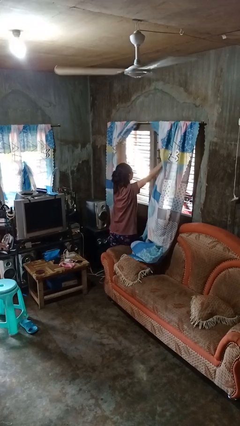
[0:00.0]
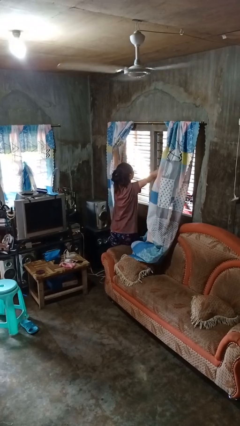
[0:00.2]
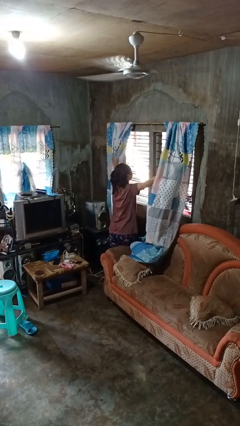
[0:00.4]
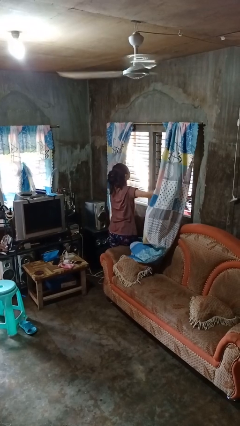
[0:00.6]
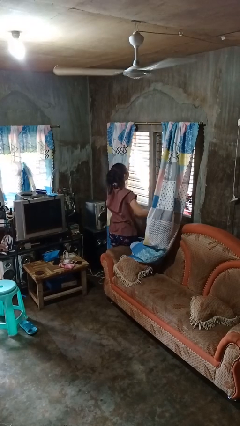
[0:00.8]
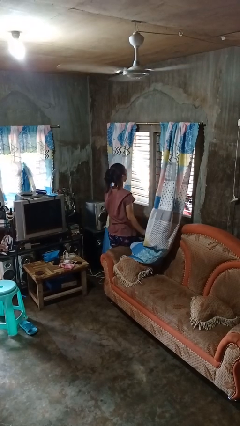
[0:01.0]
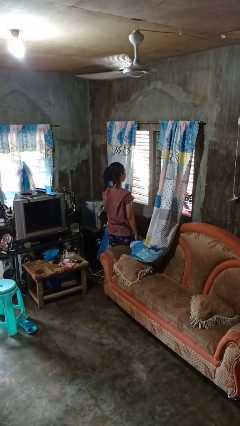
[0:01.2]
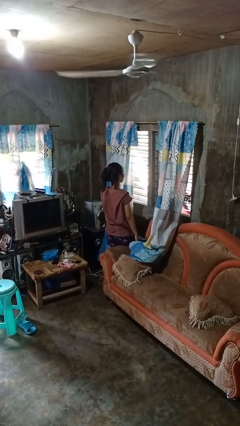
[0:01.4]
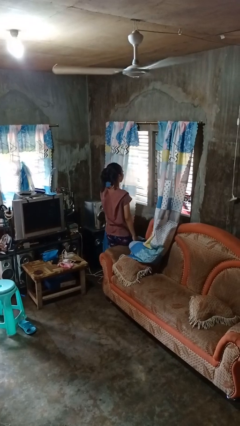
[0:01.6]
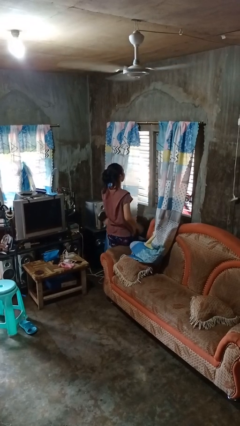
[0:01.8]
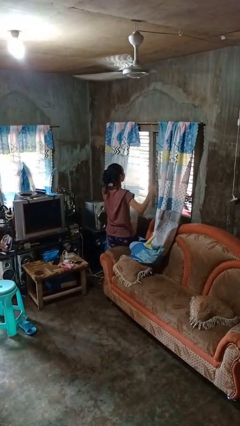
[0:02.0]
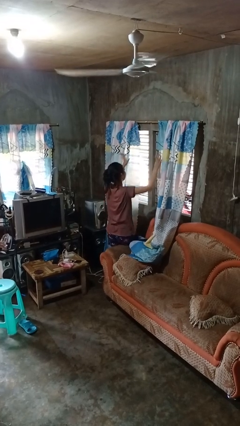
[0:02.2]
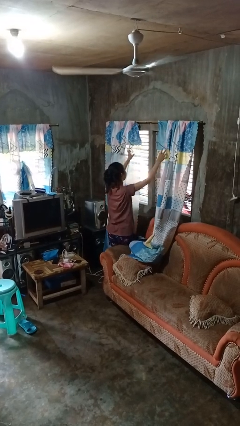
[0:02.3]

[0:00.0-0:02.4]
person opens curtains

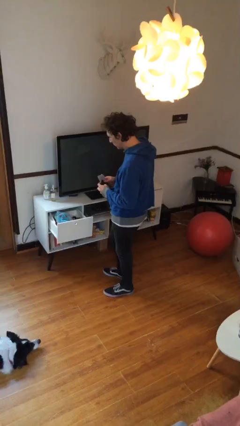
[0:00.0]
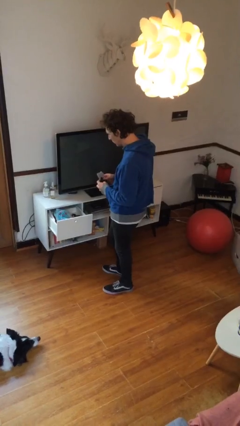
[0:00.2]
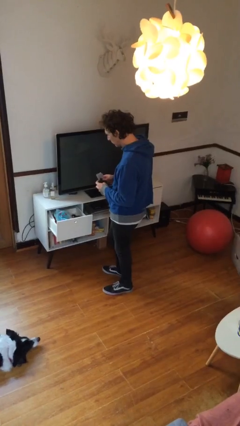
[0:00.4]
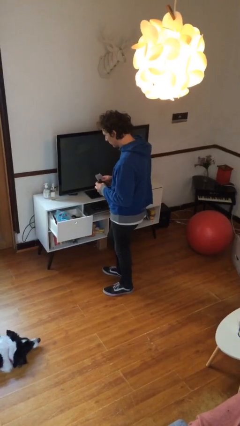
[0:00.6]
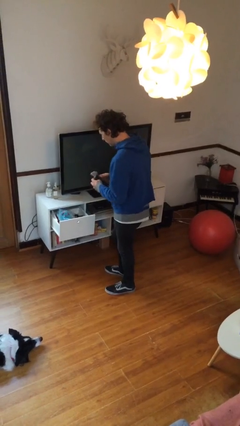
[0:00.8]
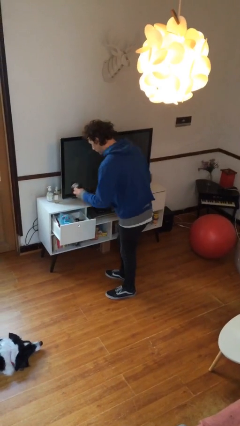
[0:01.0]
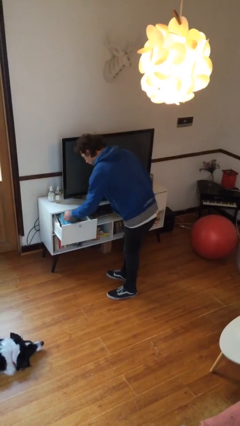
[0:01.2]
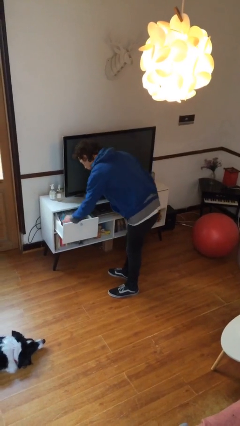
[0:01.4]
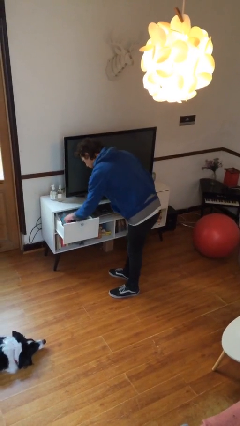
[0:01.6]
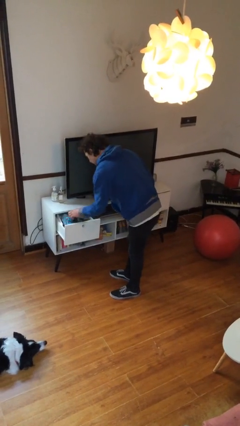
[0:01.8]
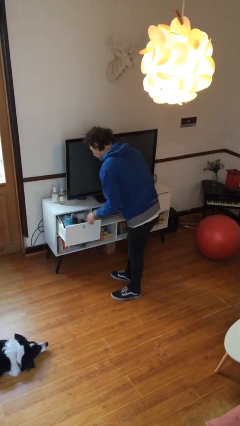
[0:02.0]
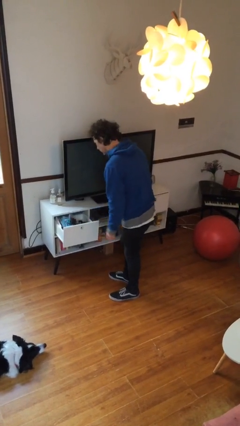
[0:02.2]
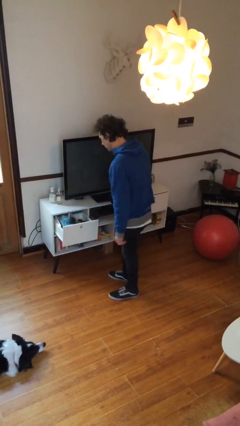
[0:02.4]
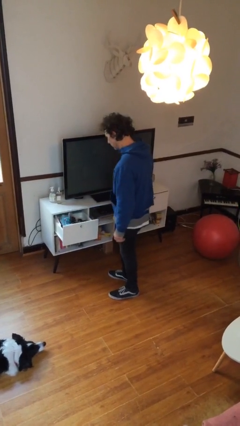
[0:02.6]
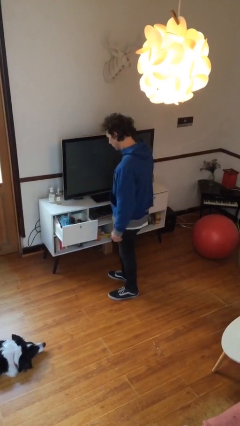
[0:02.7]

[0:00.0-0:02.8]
person puts clothes into dresser

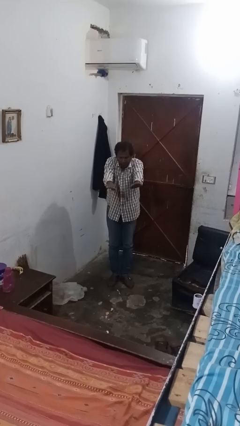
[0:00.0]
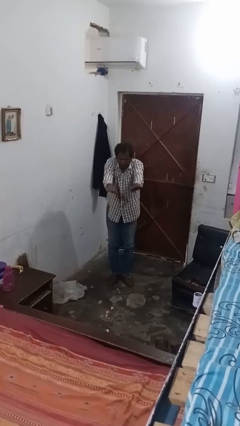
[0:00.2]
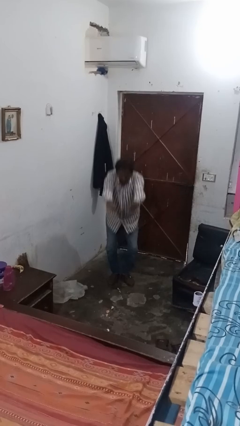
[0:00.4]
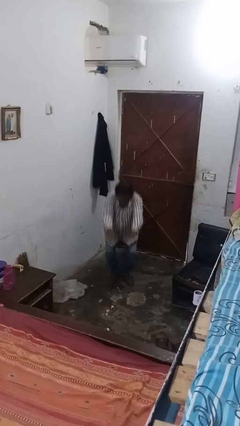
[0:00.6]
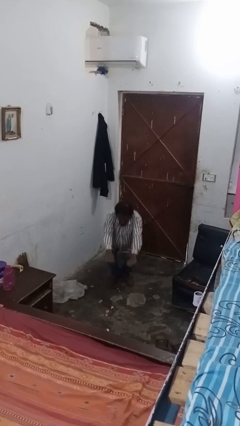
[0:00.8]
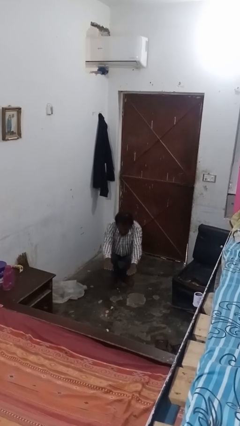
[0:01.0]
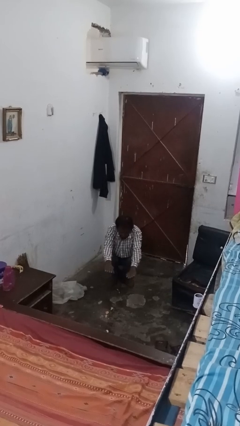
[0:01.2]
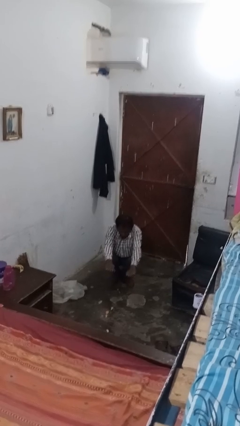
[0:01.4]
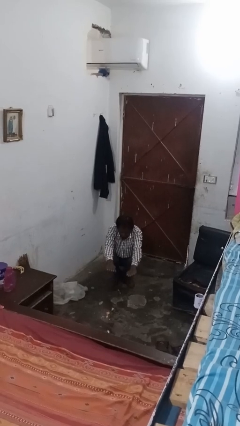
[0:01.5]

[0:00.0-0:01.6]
person squats

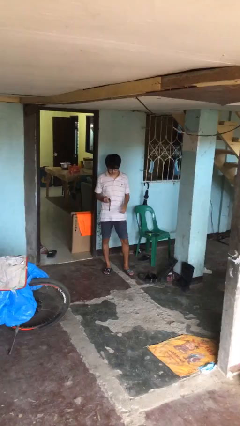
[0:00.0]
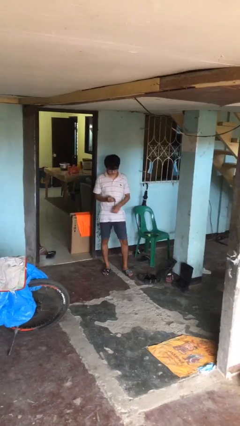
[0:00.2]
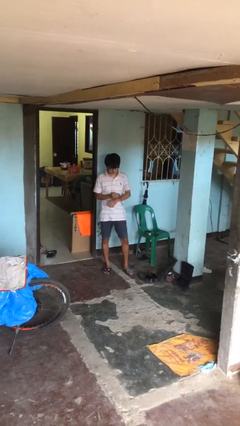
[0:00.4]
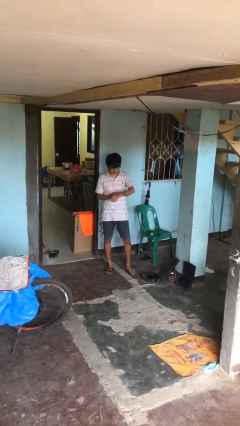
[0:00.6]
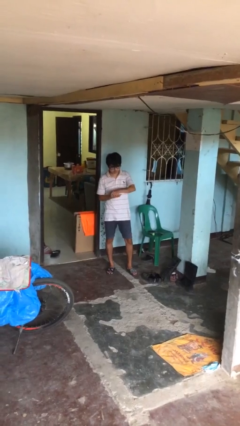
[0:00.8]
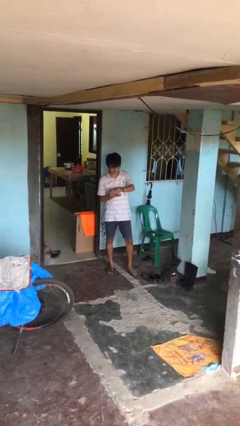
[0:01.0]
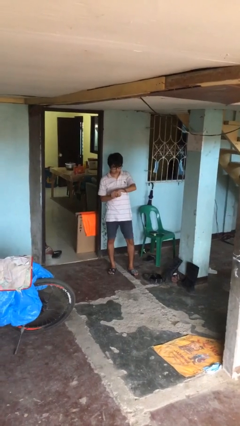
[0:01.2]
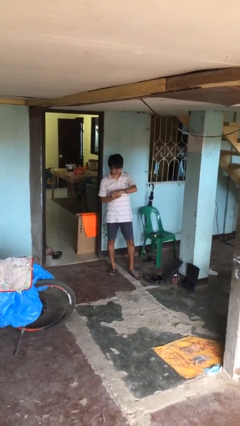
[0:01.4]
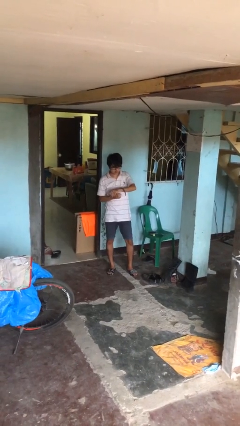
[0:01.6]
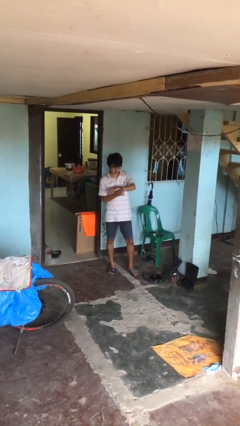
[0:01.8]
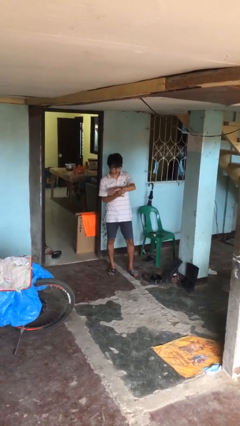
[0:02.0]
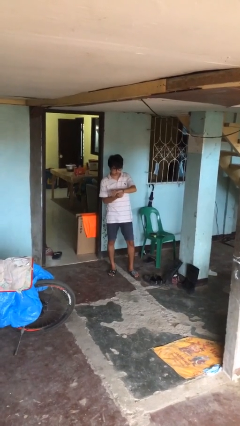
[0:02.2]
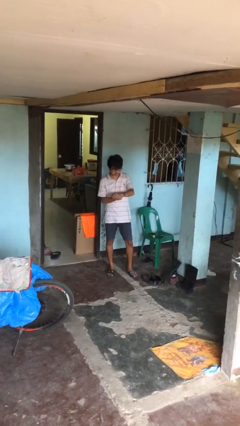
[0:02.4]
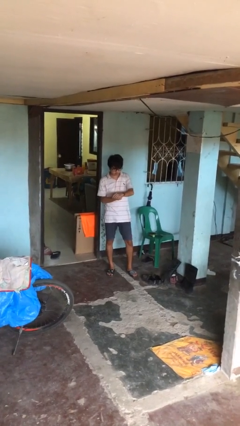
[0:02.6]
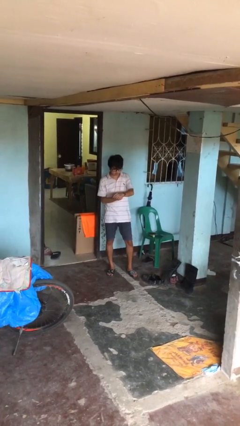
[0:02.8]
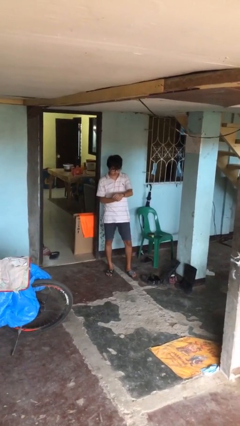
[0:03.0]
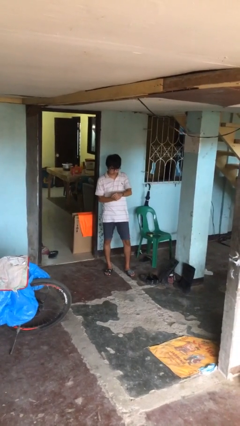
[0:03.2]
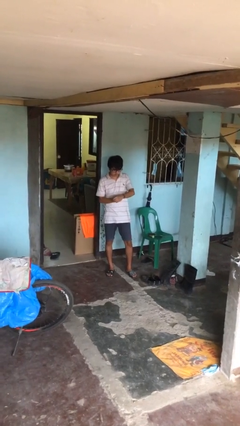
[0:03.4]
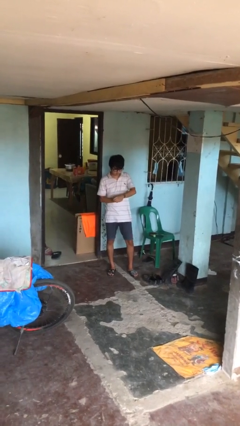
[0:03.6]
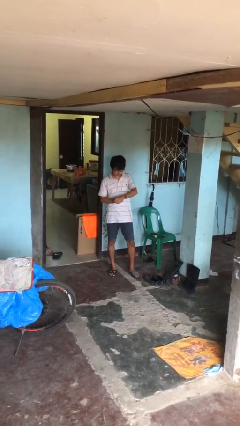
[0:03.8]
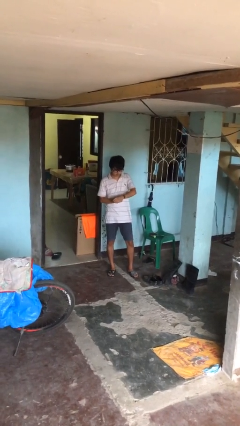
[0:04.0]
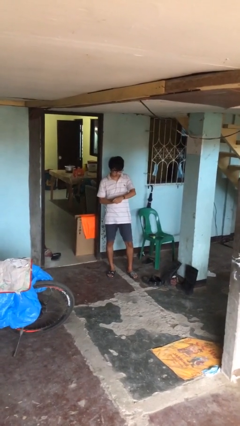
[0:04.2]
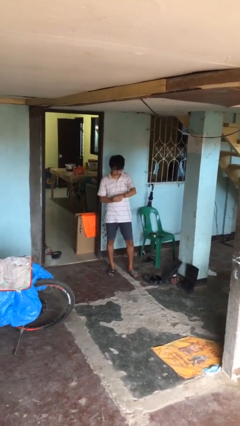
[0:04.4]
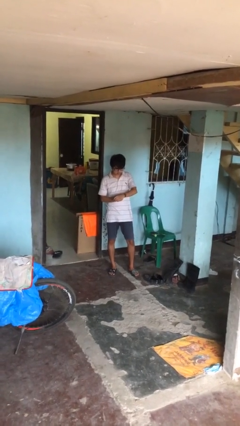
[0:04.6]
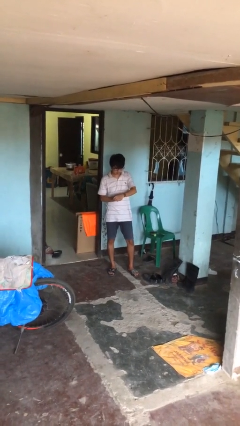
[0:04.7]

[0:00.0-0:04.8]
person puts on wristwatch

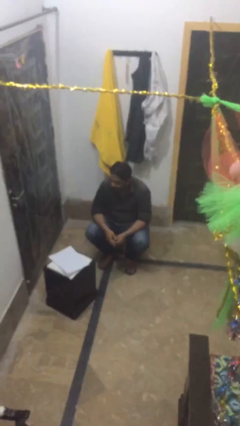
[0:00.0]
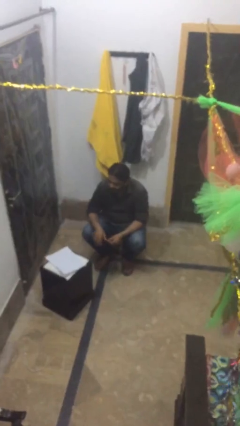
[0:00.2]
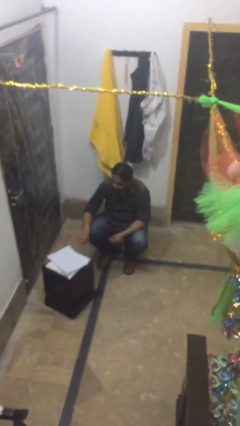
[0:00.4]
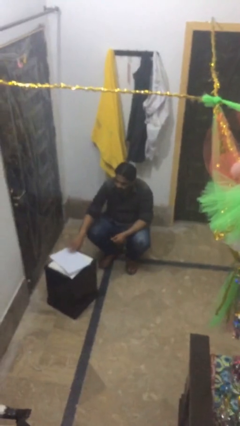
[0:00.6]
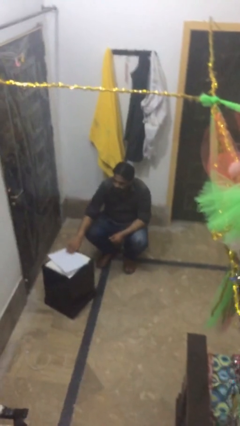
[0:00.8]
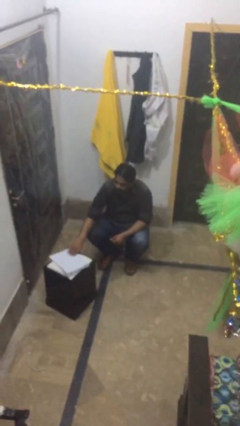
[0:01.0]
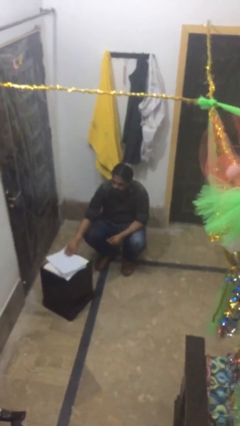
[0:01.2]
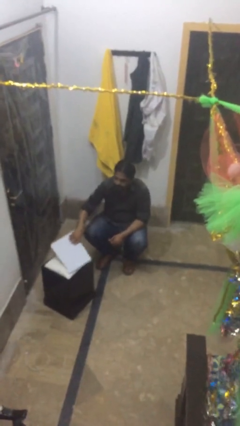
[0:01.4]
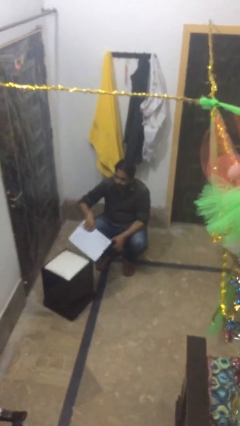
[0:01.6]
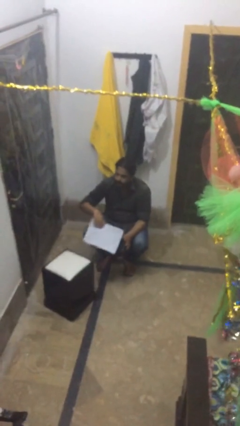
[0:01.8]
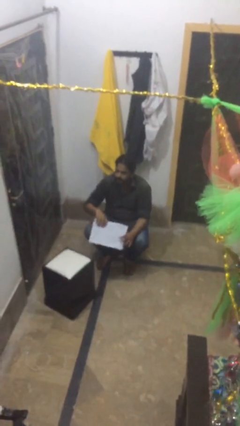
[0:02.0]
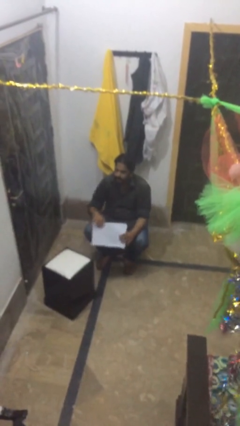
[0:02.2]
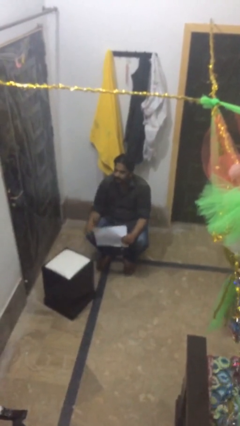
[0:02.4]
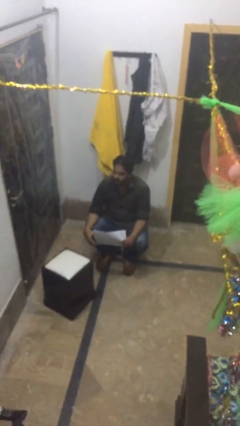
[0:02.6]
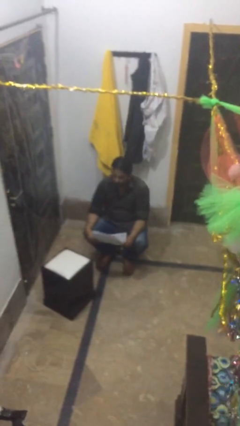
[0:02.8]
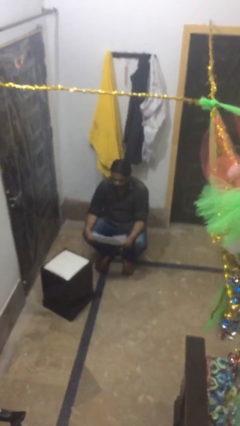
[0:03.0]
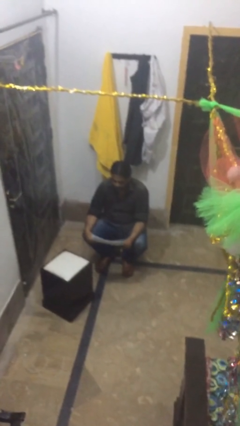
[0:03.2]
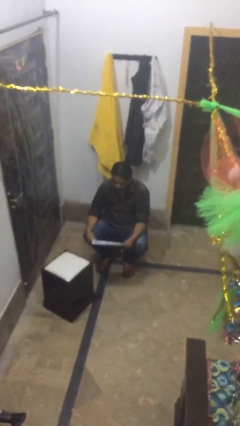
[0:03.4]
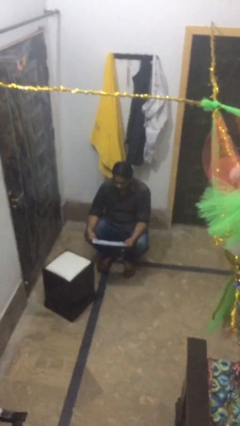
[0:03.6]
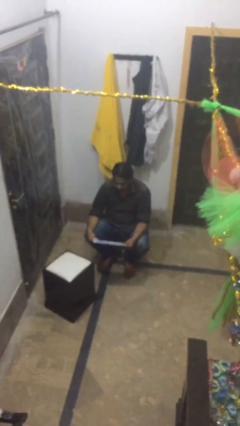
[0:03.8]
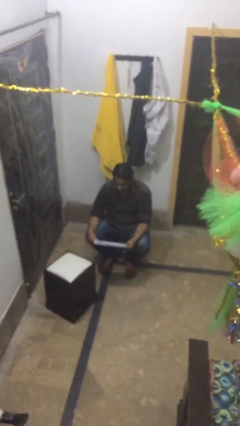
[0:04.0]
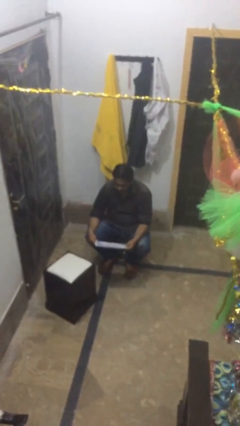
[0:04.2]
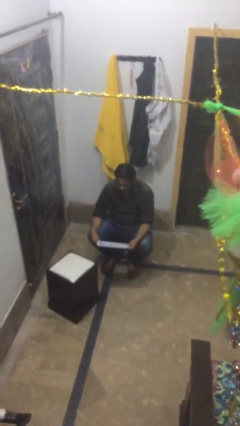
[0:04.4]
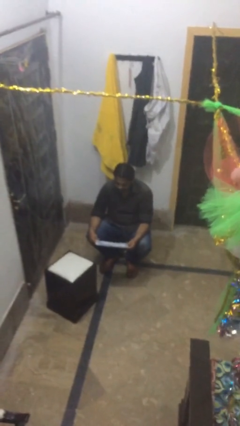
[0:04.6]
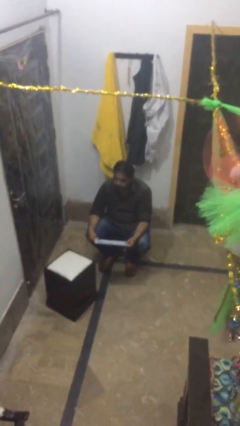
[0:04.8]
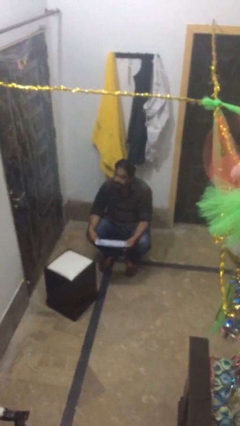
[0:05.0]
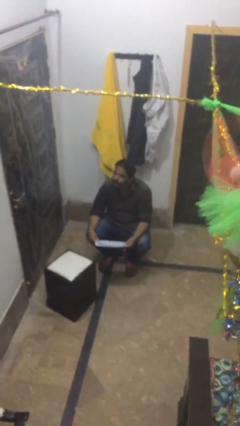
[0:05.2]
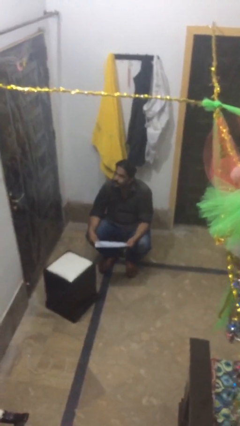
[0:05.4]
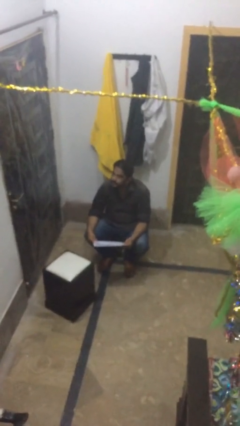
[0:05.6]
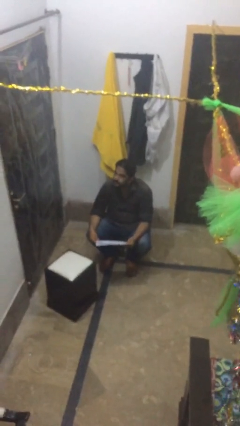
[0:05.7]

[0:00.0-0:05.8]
person picks up object from table
